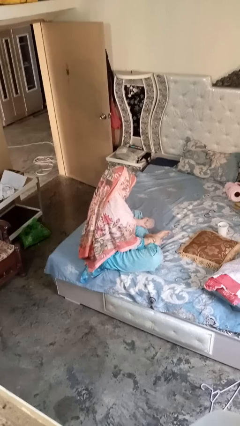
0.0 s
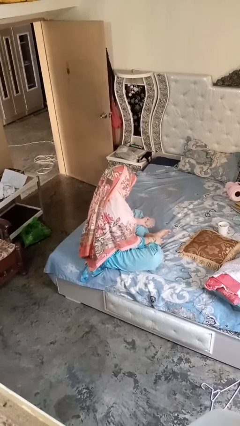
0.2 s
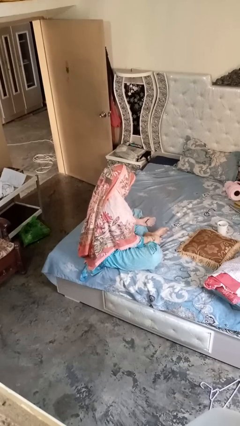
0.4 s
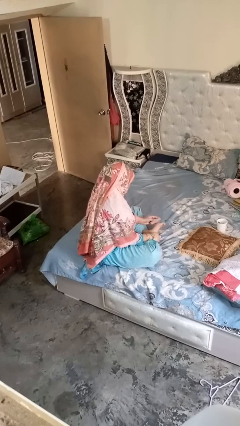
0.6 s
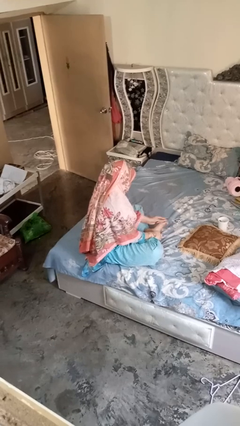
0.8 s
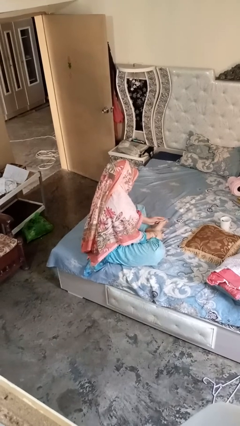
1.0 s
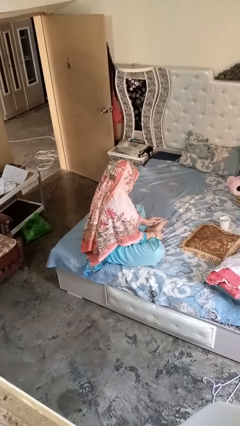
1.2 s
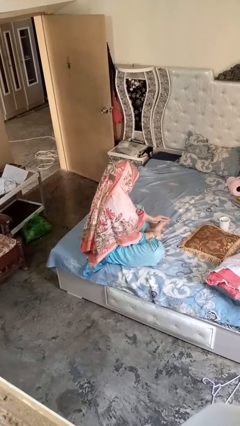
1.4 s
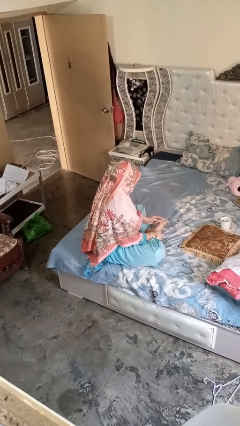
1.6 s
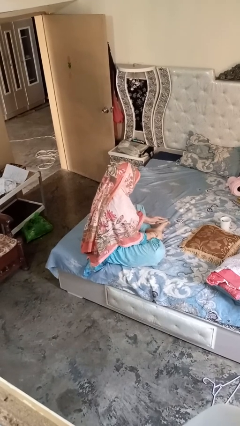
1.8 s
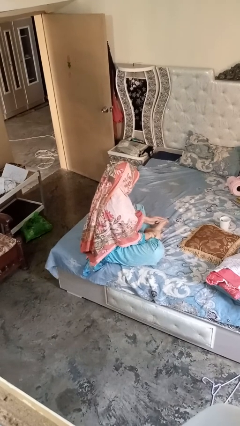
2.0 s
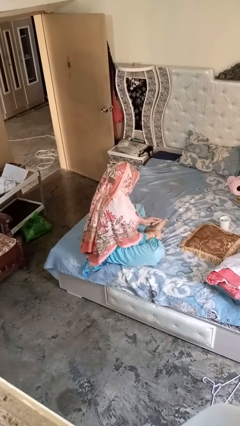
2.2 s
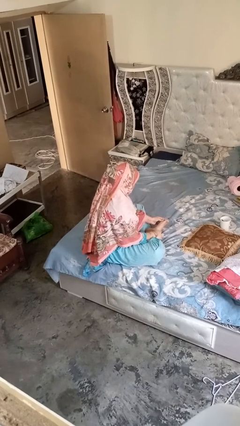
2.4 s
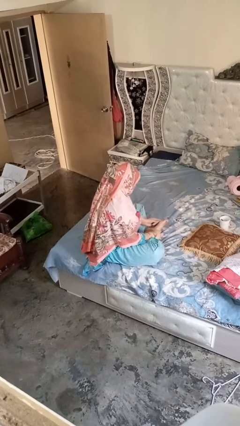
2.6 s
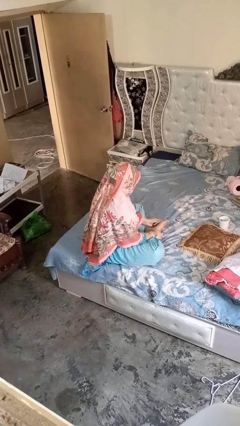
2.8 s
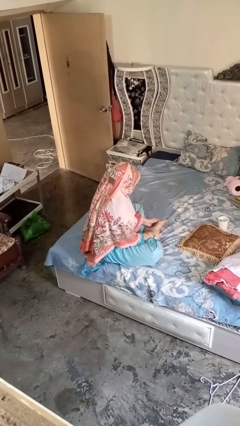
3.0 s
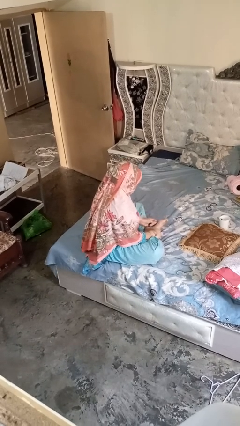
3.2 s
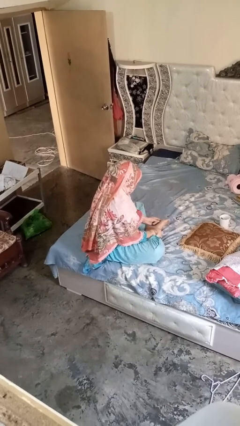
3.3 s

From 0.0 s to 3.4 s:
person rubs foot

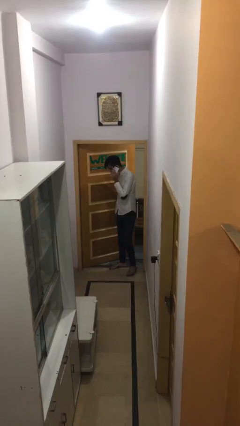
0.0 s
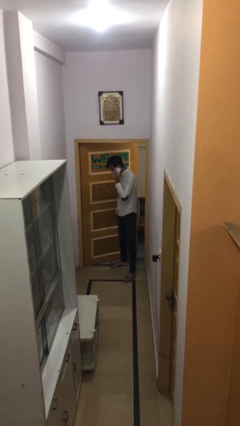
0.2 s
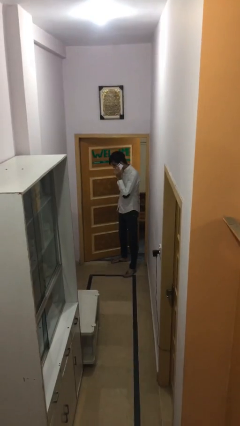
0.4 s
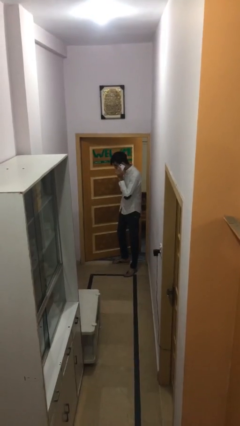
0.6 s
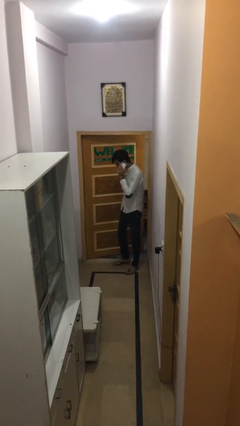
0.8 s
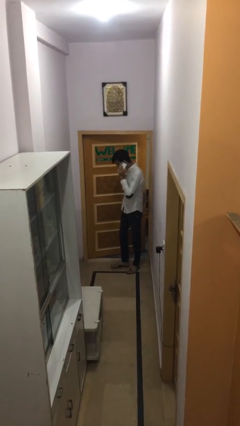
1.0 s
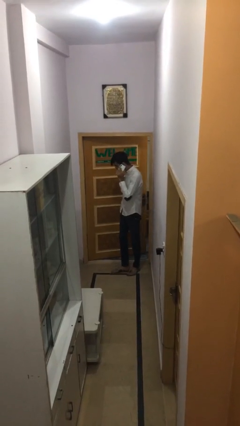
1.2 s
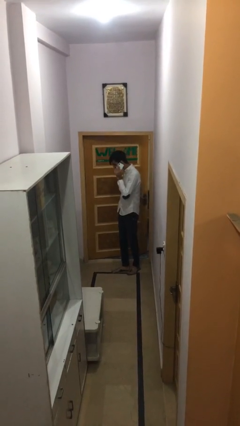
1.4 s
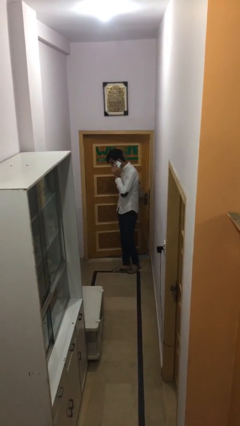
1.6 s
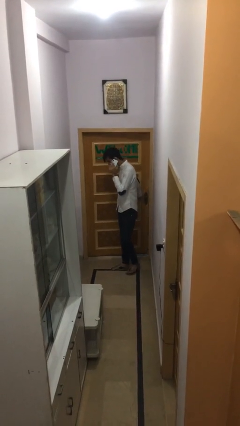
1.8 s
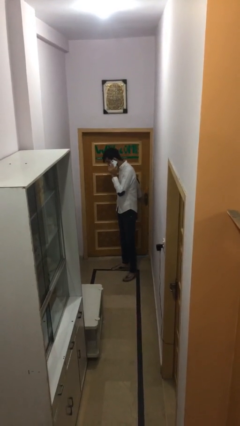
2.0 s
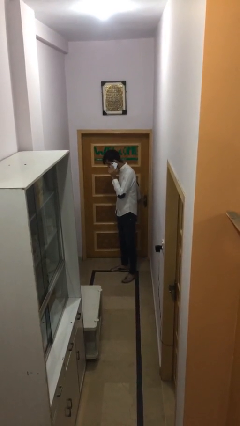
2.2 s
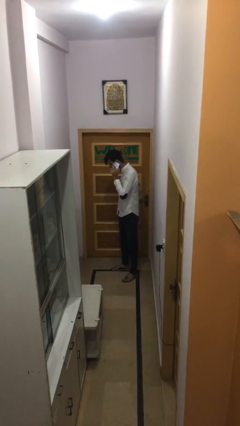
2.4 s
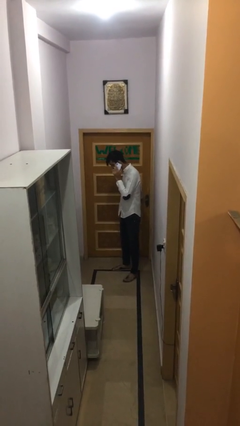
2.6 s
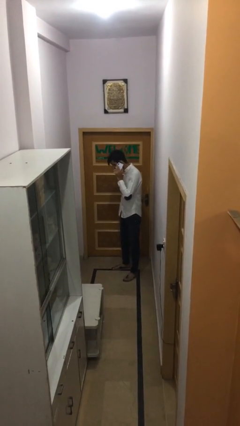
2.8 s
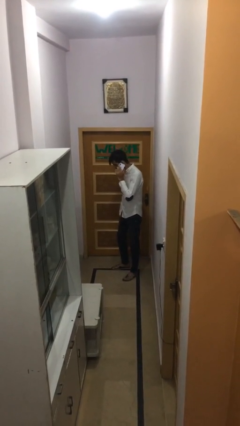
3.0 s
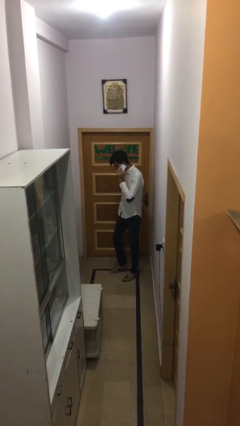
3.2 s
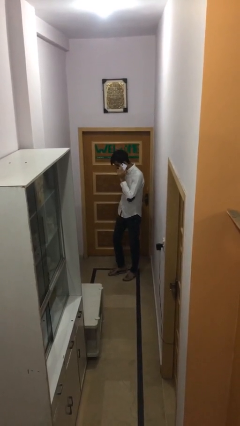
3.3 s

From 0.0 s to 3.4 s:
person closes facility door

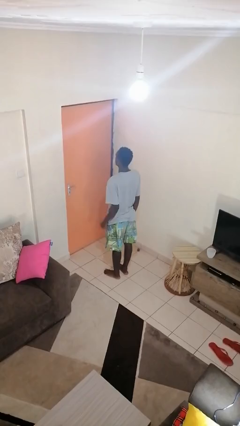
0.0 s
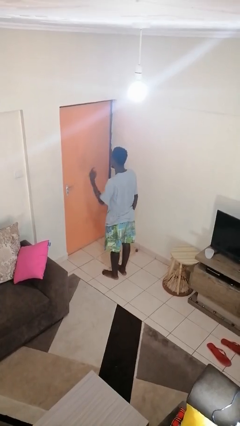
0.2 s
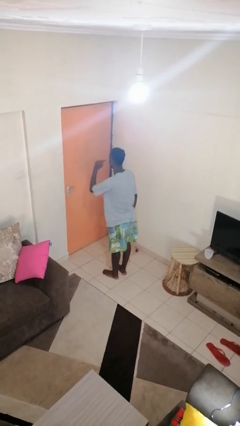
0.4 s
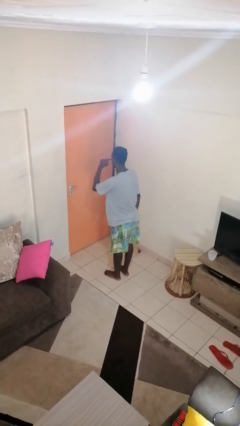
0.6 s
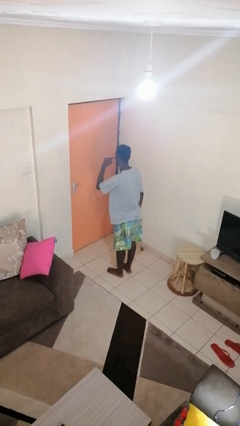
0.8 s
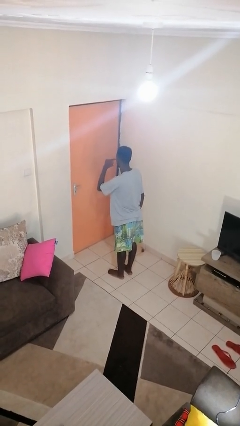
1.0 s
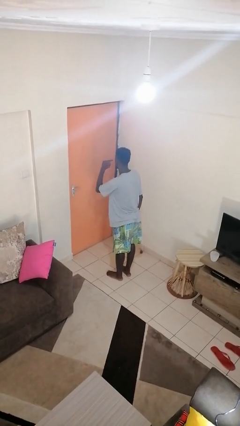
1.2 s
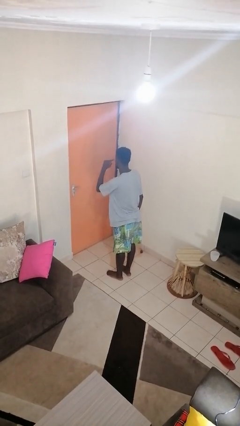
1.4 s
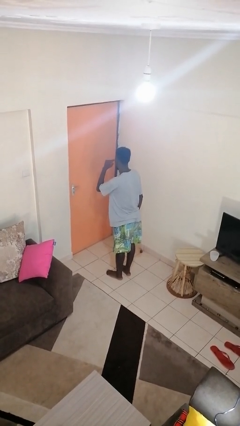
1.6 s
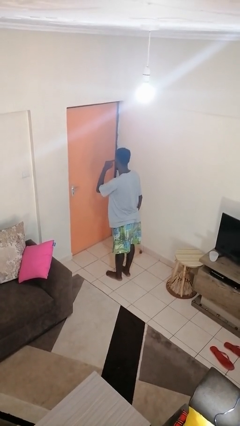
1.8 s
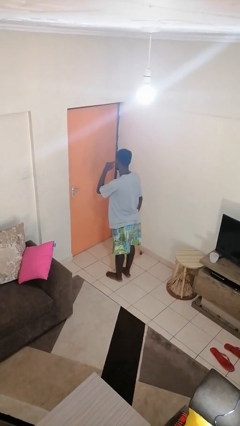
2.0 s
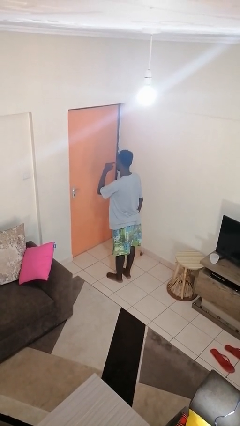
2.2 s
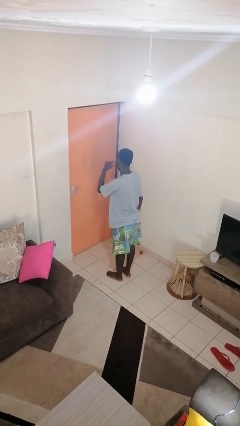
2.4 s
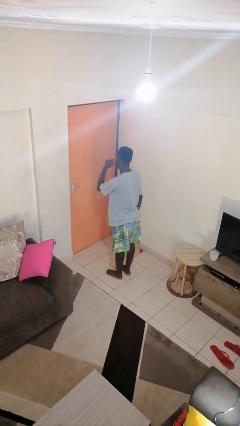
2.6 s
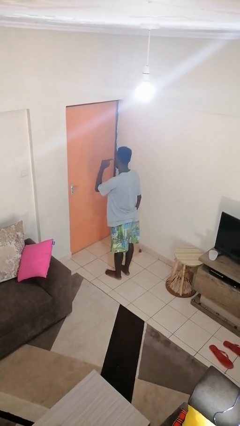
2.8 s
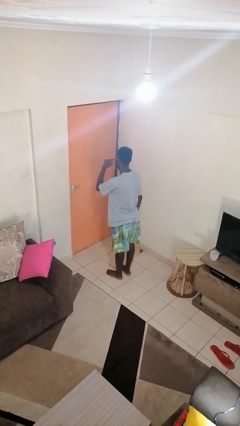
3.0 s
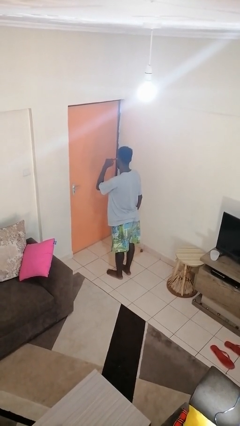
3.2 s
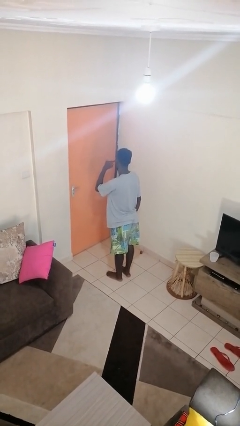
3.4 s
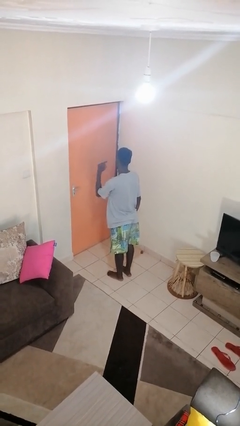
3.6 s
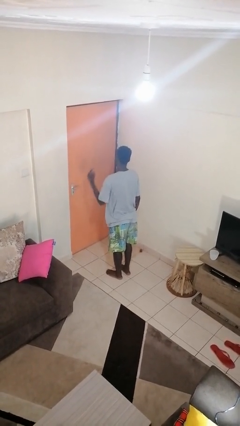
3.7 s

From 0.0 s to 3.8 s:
person gestures listen closely

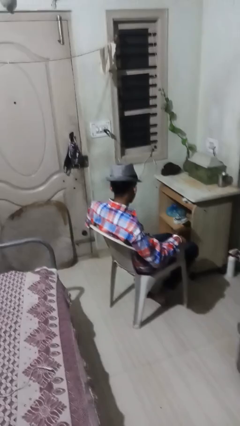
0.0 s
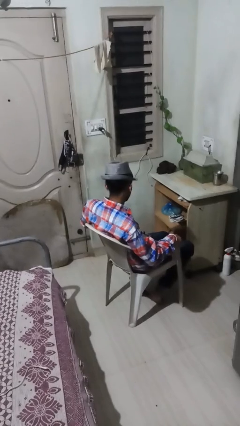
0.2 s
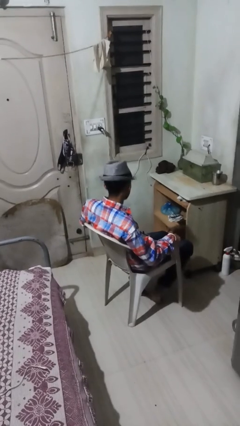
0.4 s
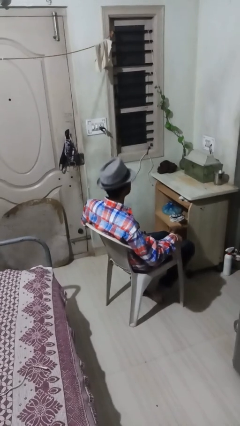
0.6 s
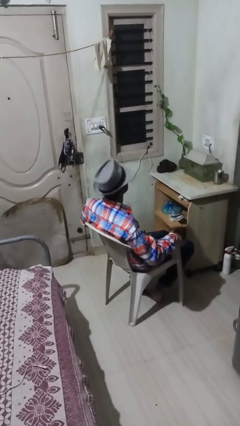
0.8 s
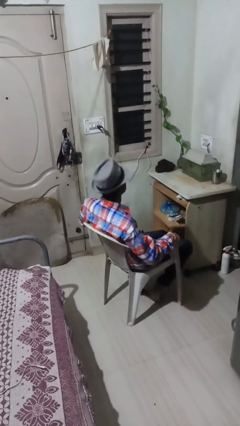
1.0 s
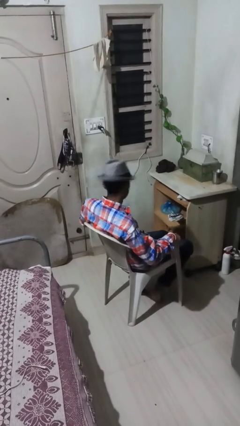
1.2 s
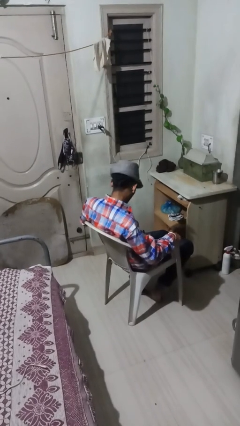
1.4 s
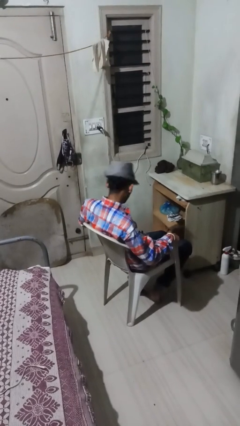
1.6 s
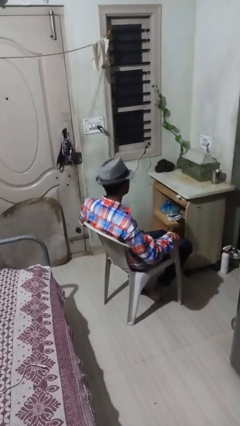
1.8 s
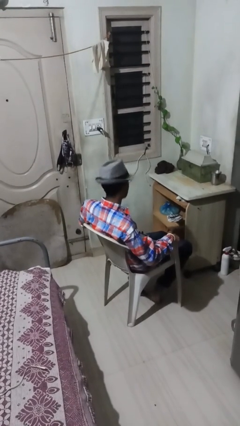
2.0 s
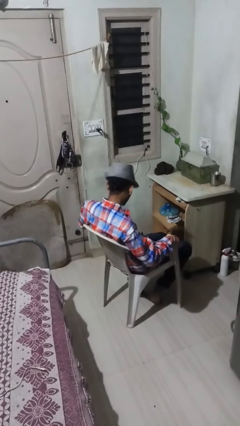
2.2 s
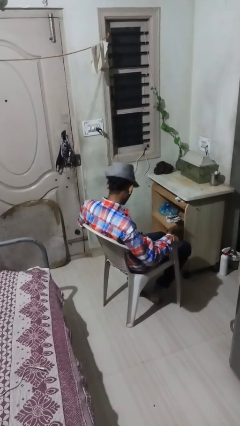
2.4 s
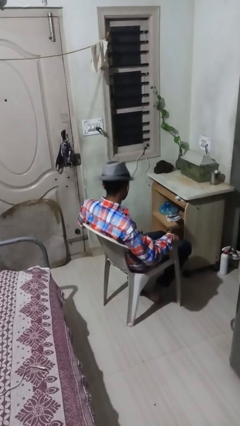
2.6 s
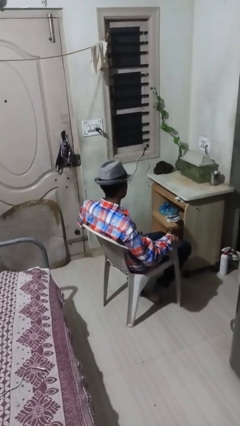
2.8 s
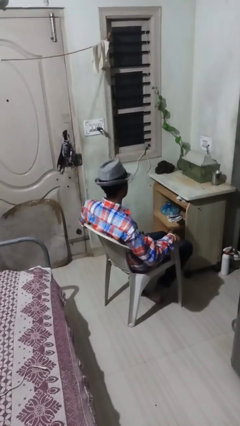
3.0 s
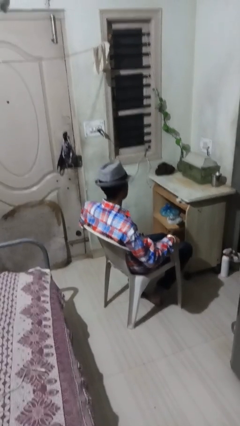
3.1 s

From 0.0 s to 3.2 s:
person nods head

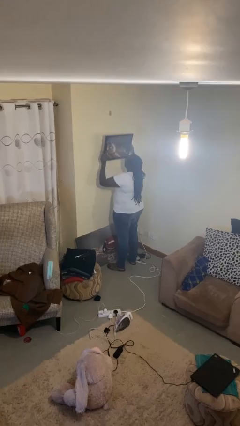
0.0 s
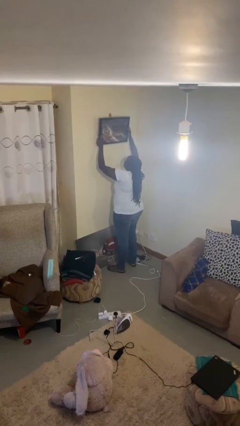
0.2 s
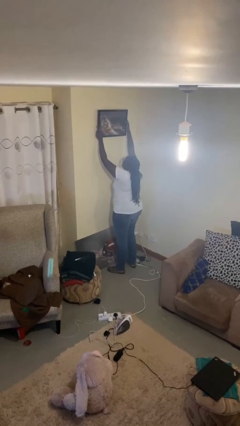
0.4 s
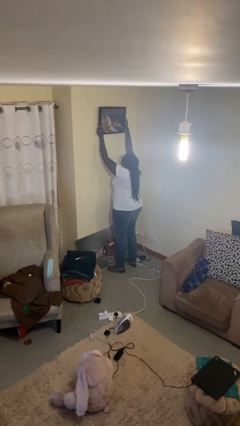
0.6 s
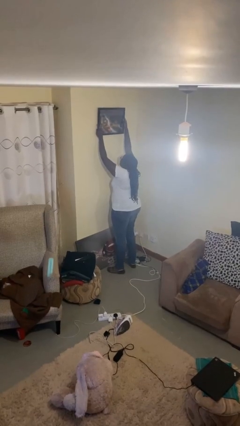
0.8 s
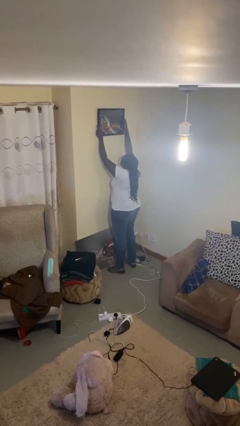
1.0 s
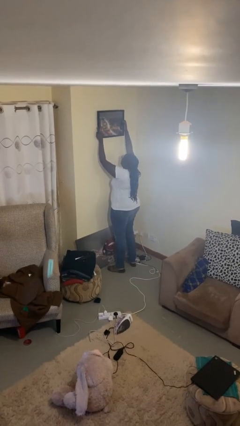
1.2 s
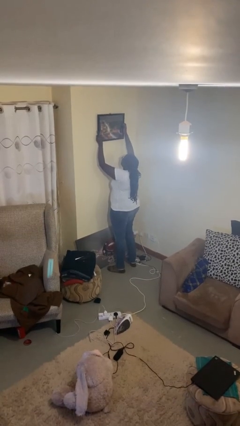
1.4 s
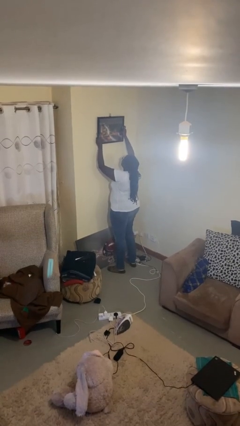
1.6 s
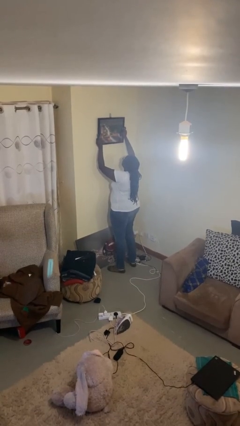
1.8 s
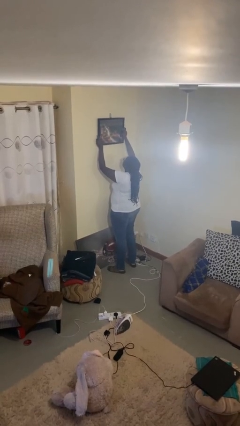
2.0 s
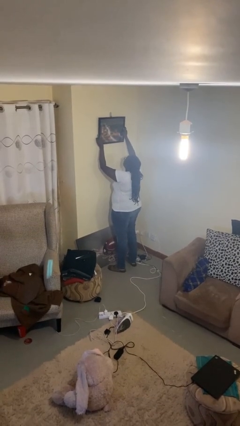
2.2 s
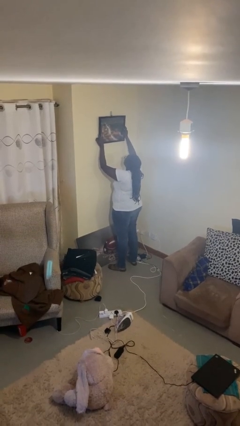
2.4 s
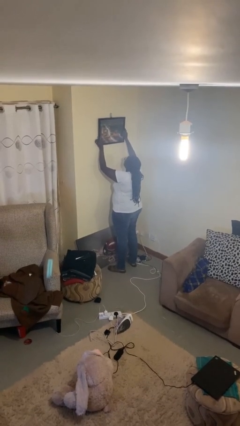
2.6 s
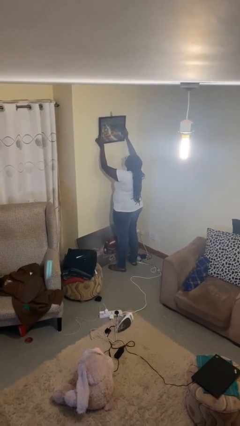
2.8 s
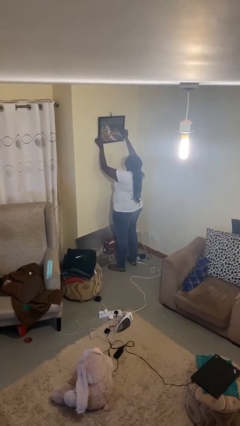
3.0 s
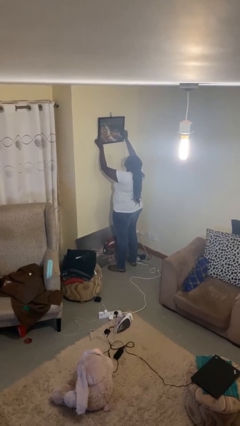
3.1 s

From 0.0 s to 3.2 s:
person puts up picture frame

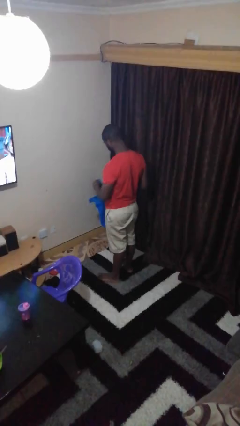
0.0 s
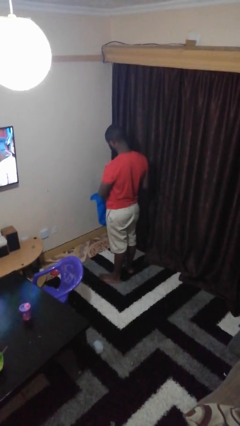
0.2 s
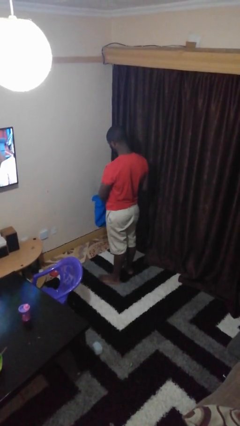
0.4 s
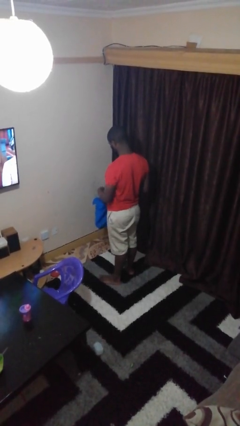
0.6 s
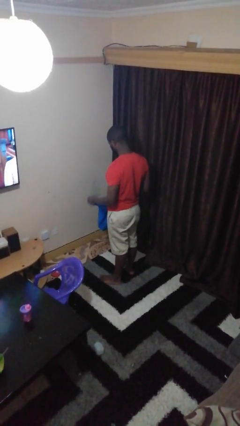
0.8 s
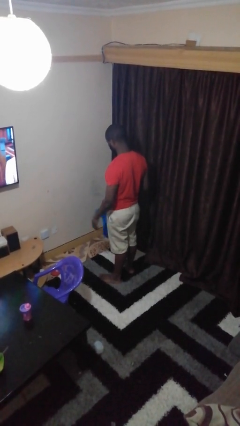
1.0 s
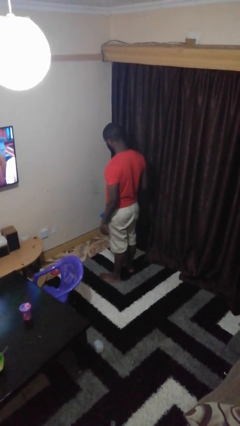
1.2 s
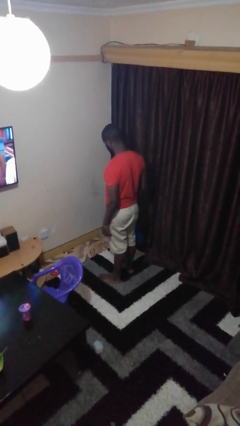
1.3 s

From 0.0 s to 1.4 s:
person puts object into bag
